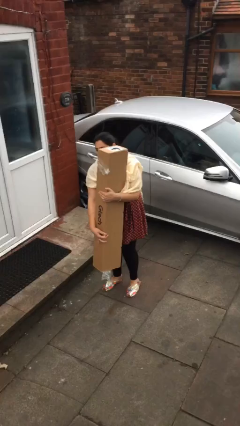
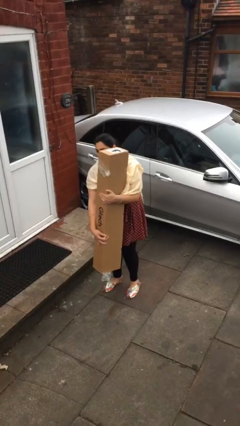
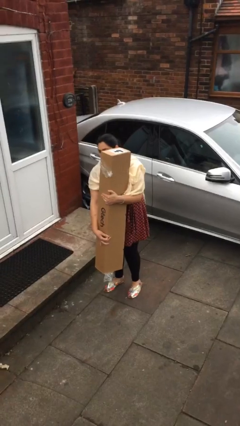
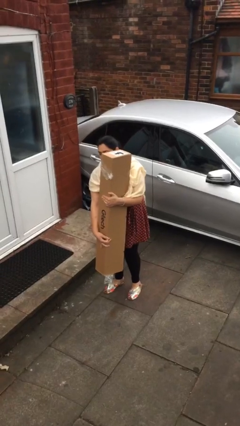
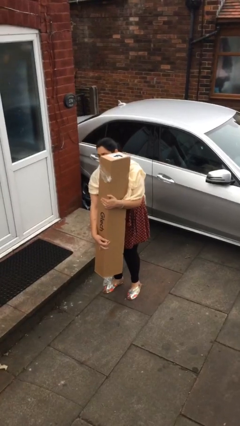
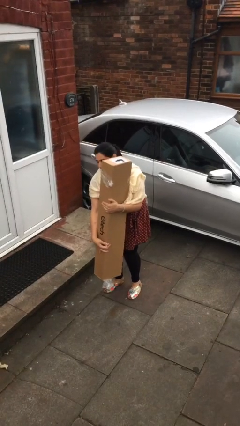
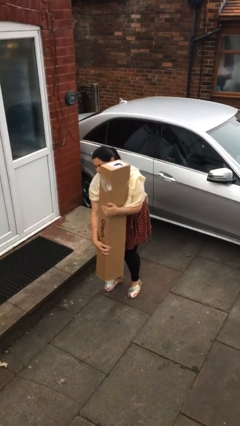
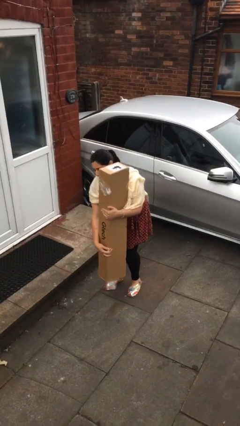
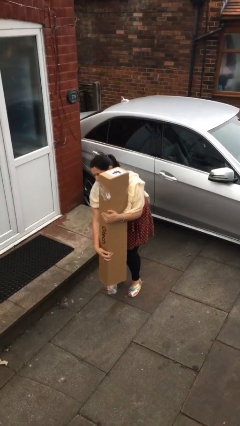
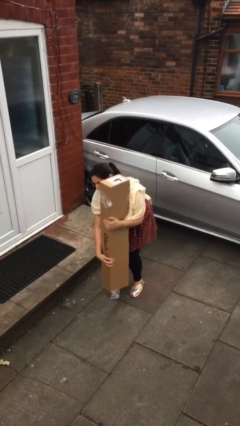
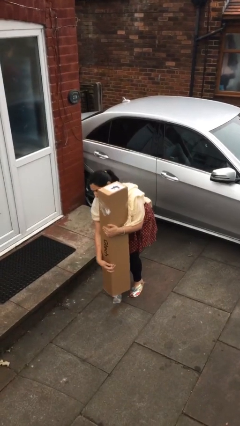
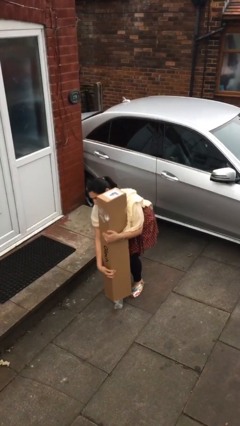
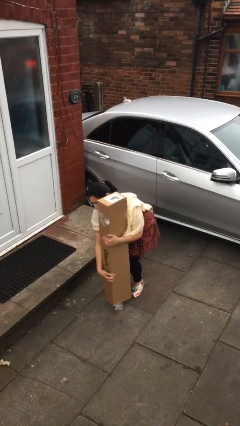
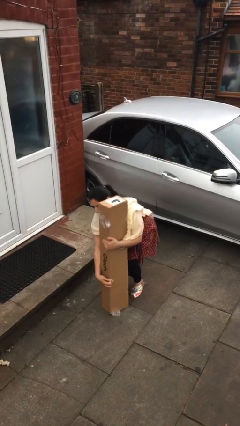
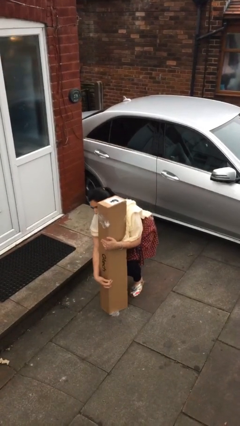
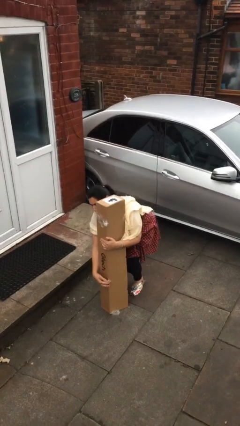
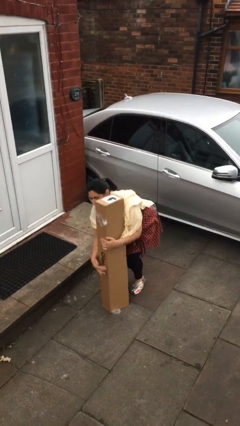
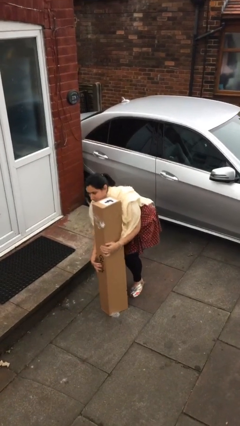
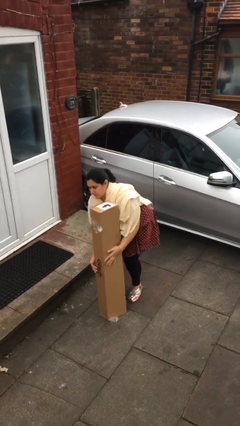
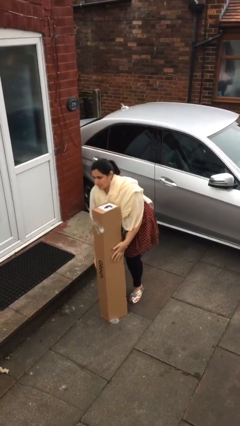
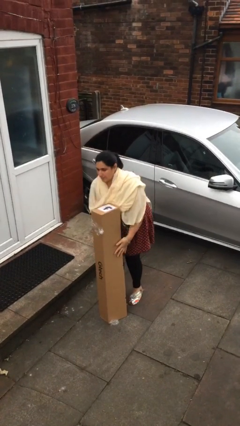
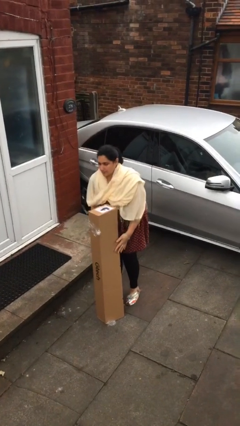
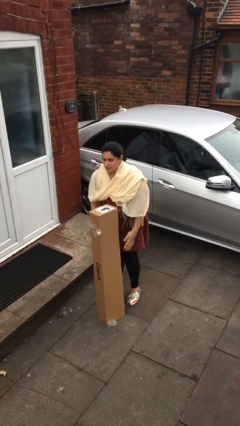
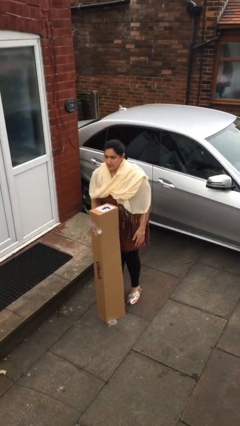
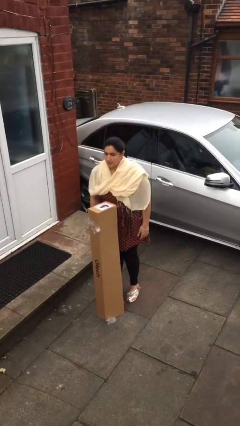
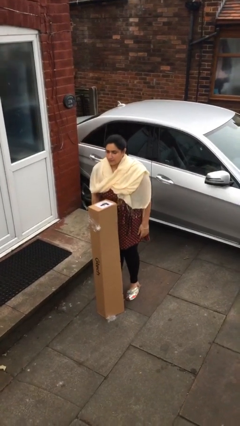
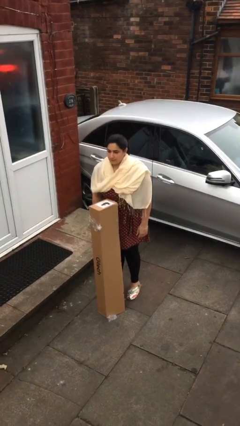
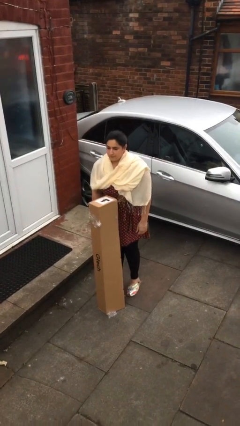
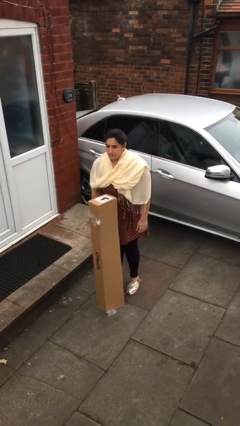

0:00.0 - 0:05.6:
person puts down object on floor

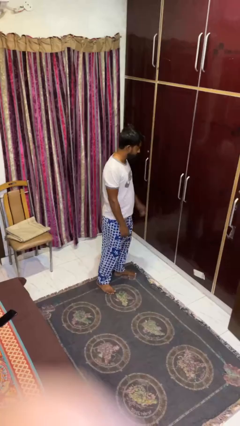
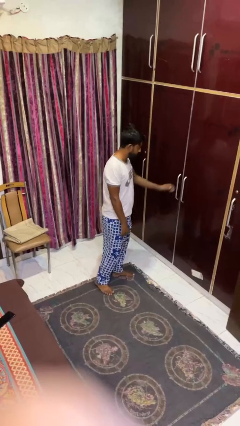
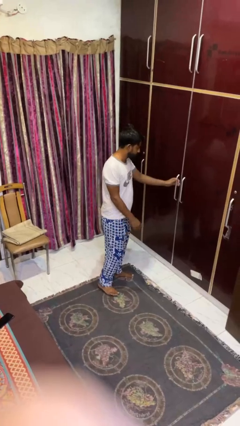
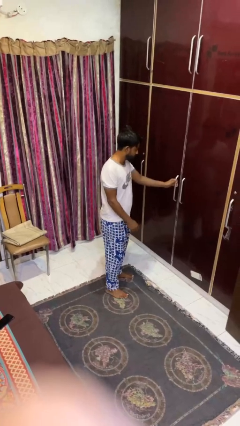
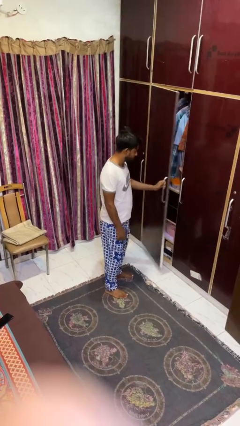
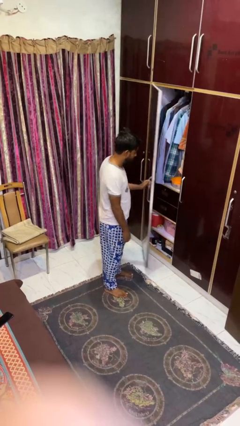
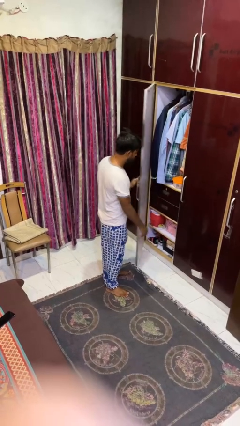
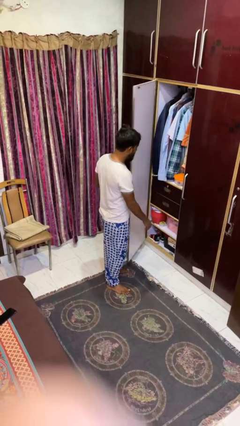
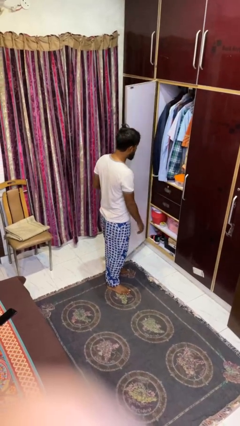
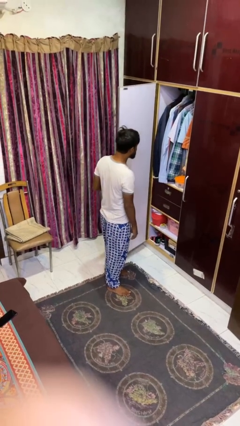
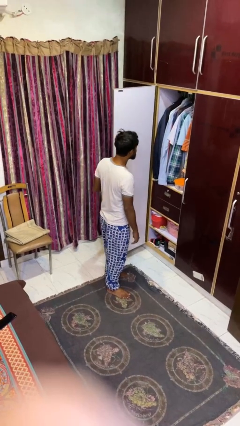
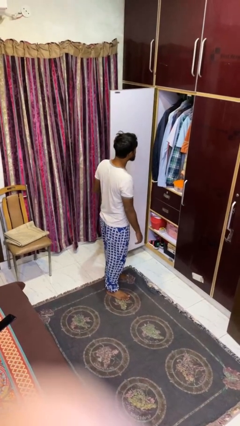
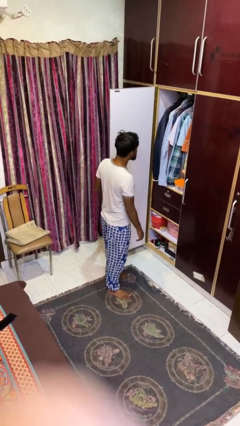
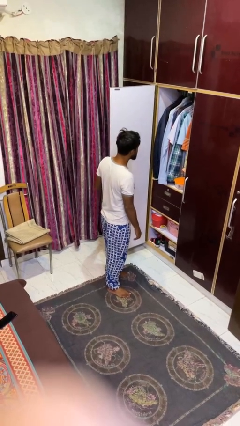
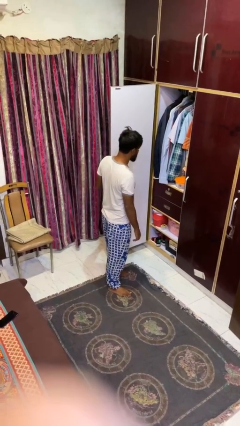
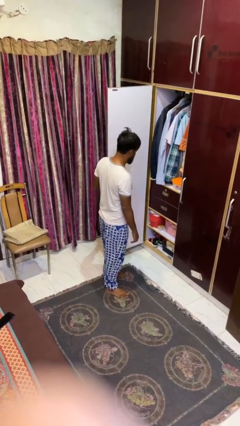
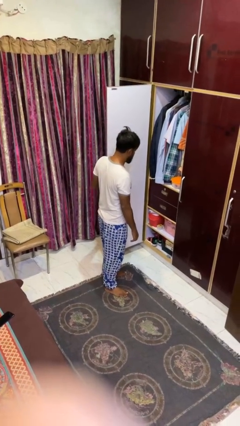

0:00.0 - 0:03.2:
person opens closet door

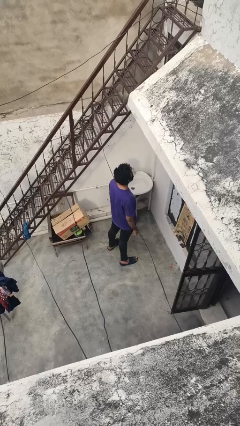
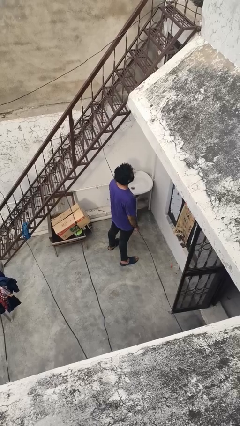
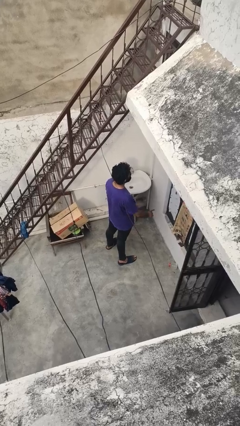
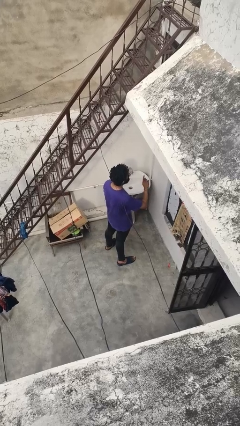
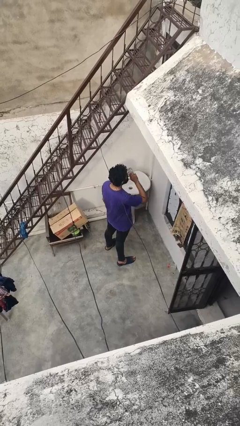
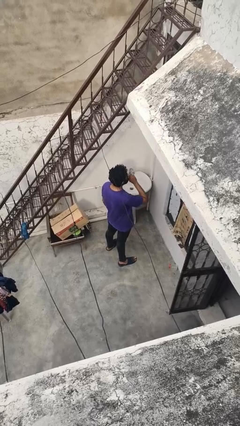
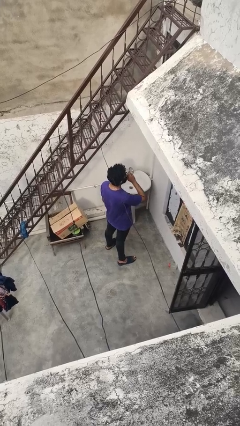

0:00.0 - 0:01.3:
person gestures be quiet

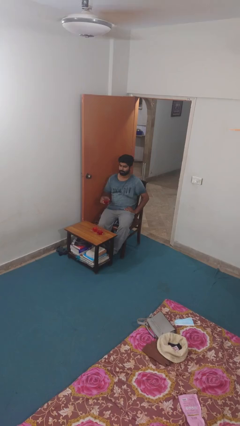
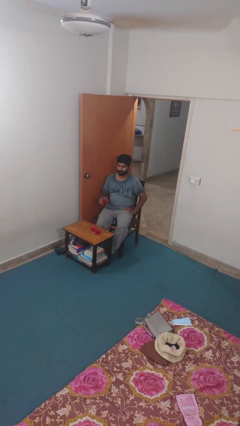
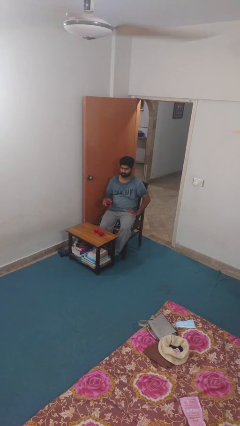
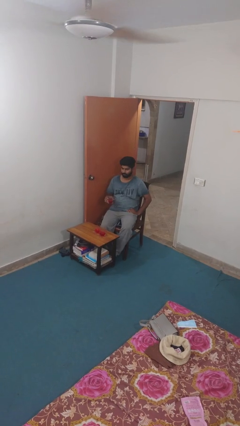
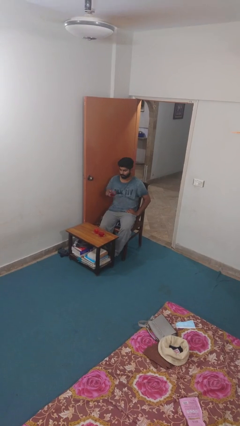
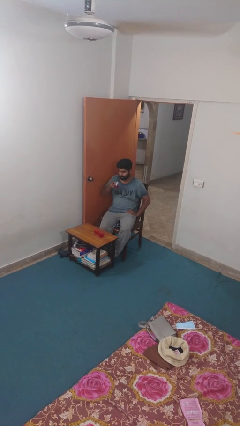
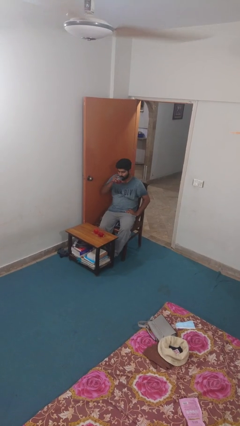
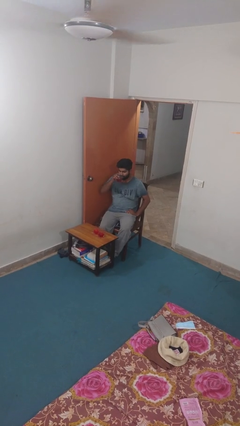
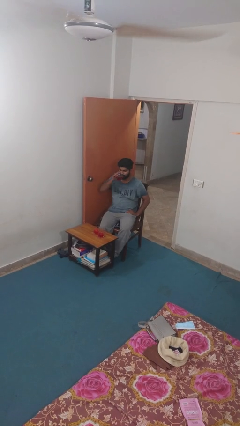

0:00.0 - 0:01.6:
person drinks from shotglass

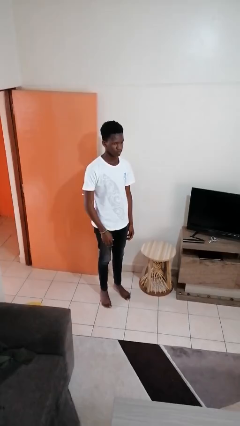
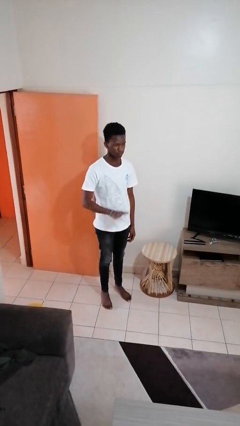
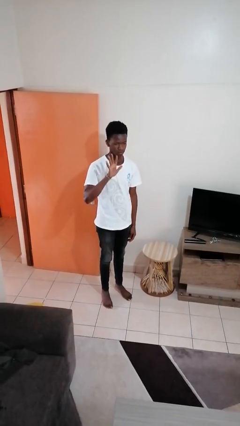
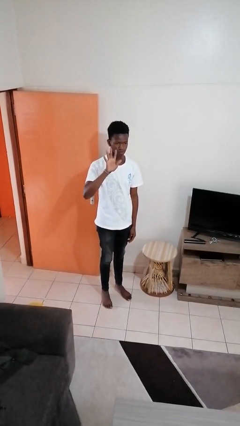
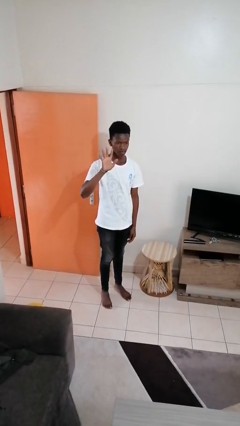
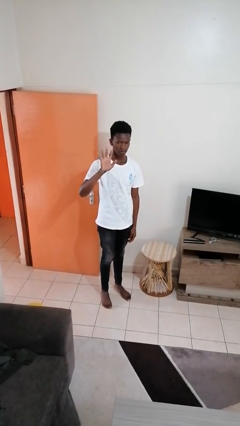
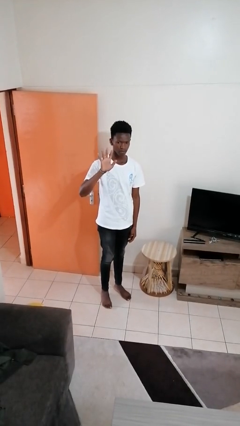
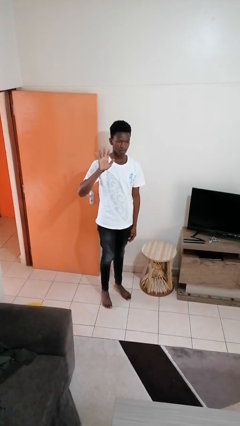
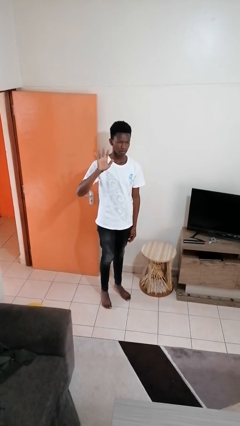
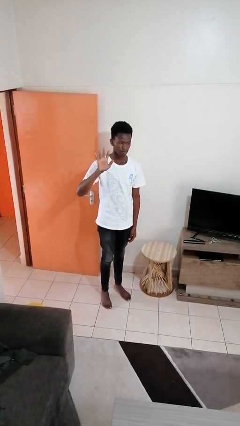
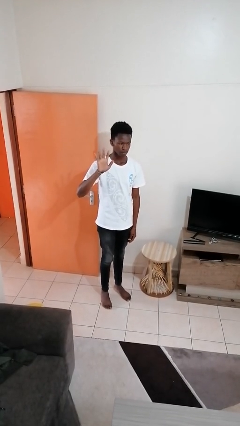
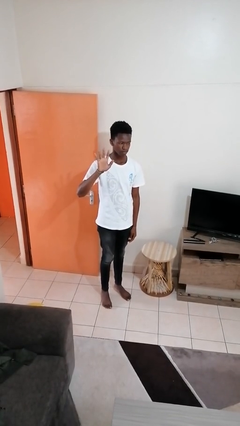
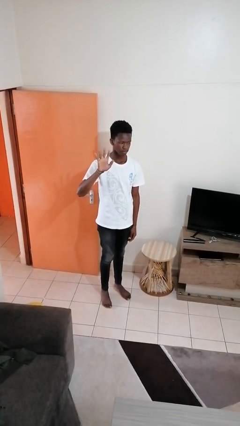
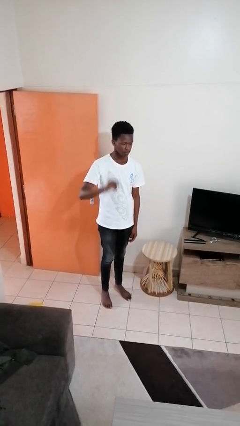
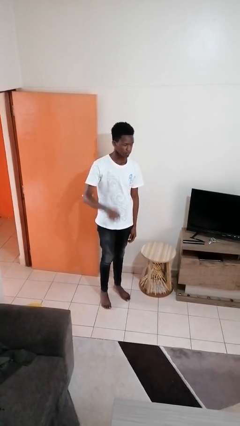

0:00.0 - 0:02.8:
person gestures number five

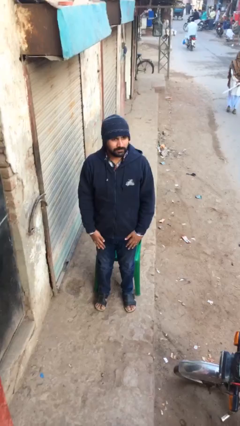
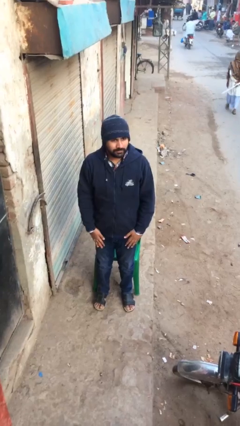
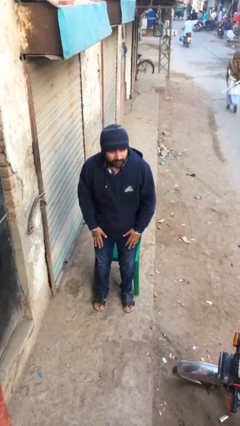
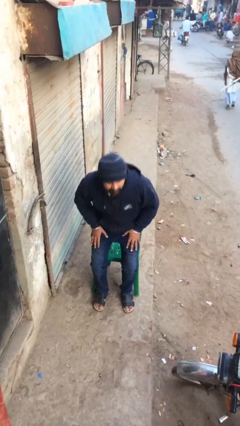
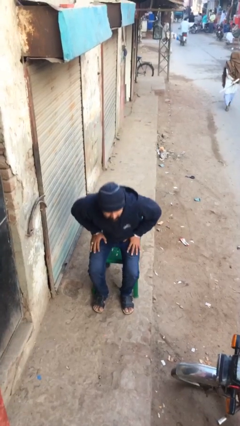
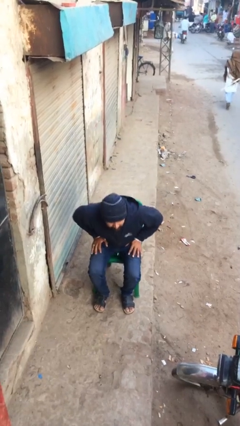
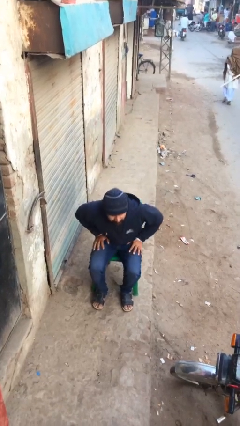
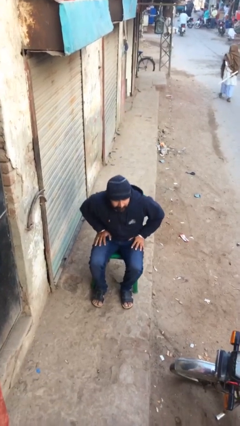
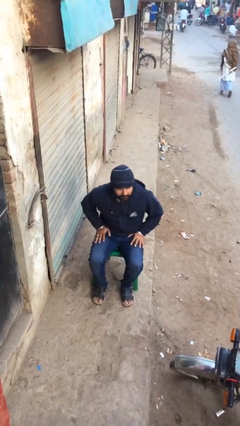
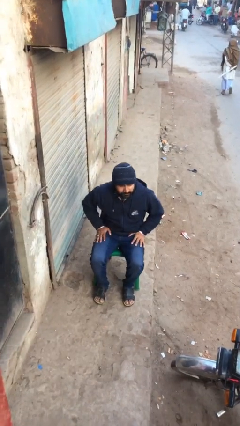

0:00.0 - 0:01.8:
person sits down

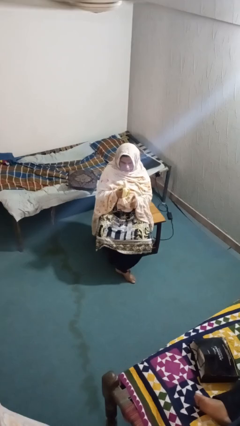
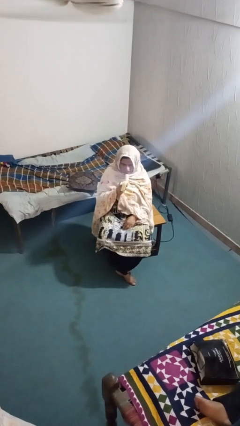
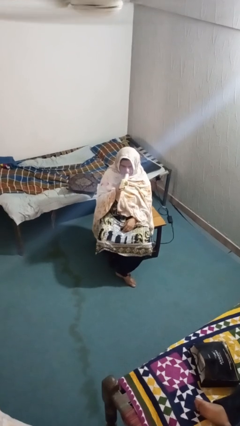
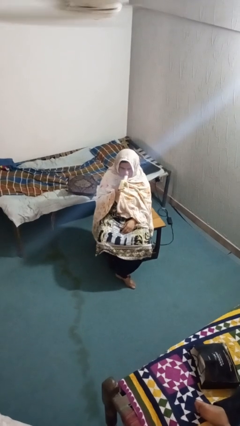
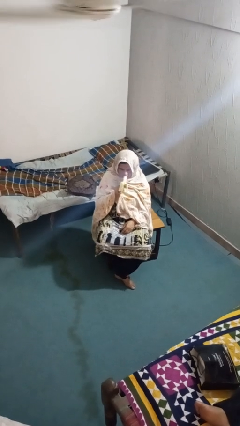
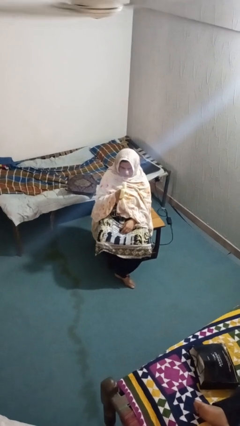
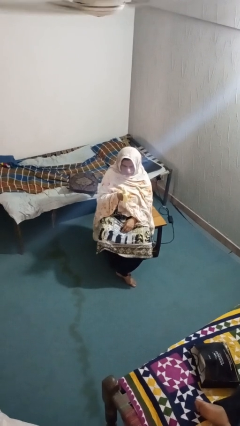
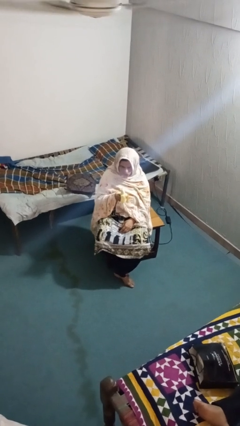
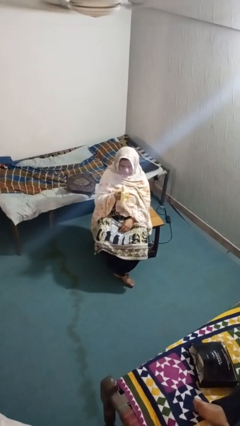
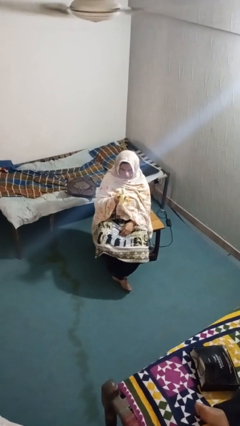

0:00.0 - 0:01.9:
person eats banana
